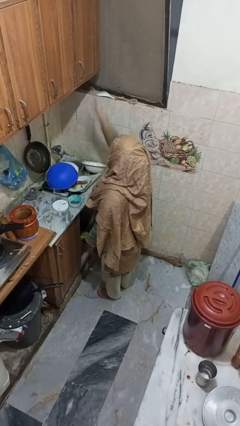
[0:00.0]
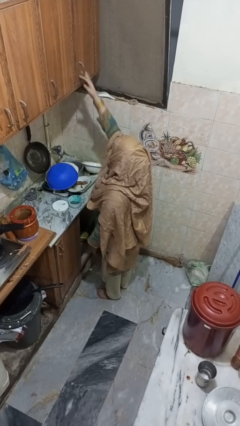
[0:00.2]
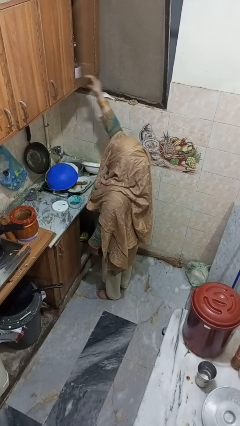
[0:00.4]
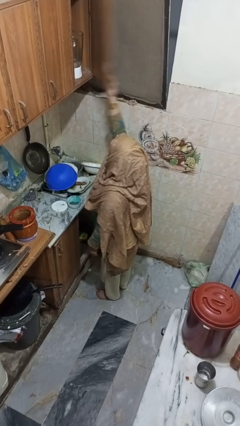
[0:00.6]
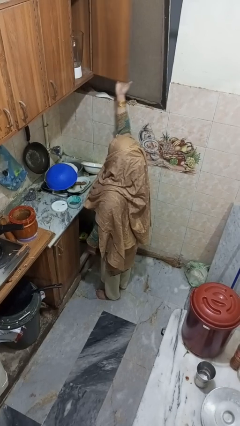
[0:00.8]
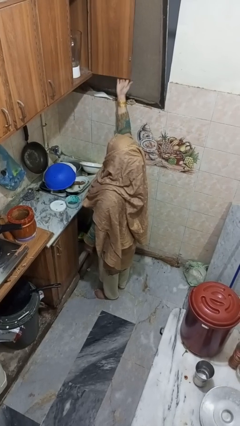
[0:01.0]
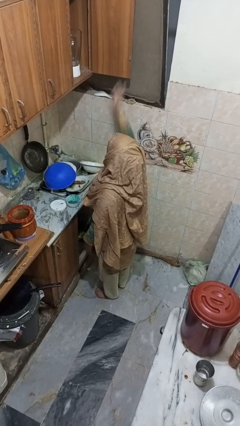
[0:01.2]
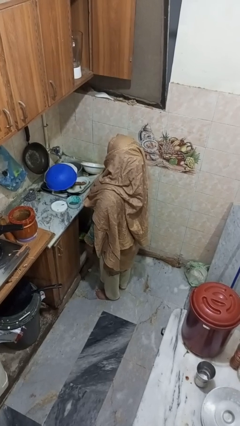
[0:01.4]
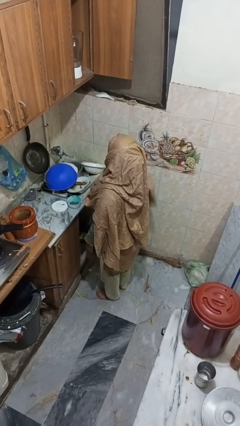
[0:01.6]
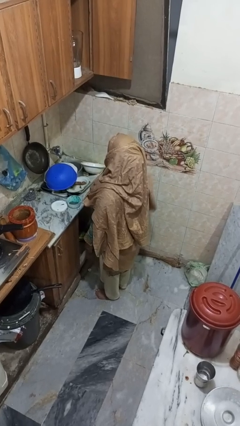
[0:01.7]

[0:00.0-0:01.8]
person opens cabinet

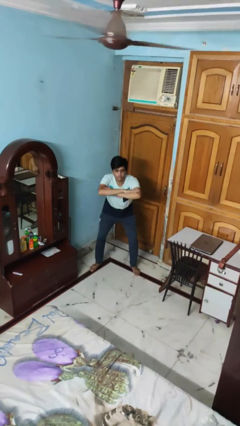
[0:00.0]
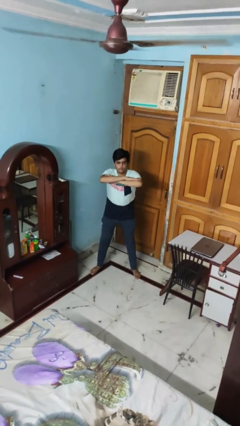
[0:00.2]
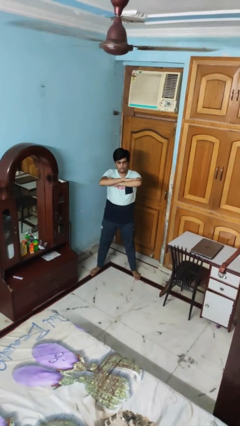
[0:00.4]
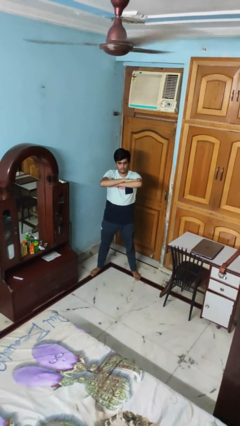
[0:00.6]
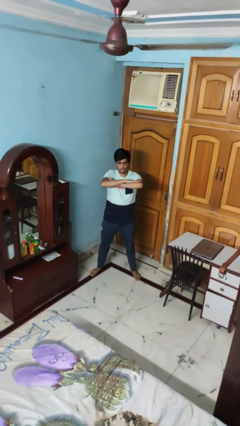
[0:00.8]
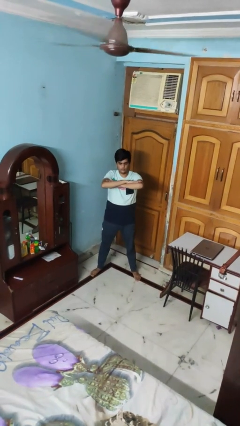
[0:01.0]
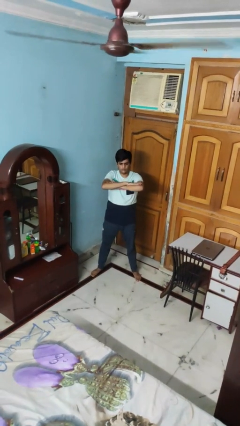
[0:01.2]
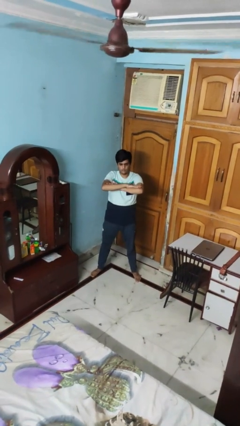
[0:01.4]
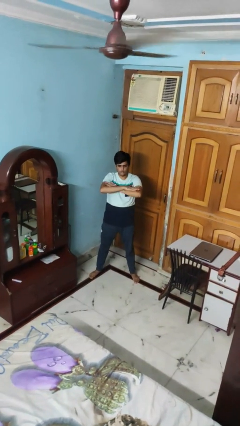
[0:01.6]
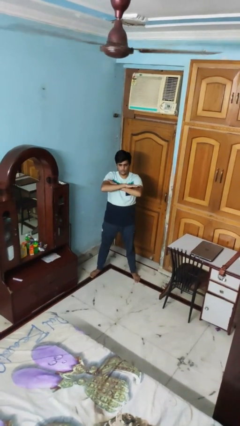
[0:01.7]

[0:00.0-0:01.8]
person stands up

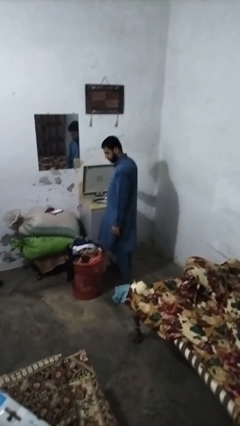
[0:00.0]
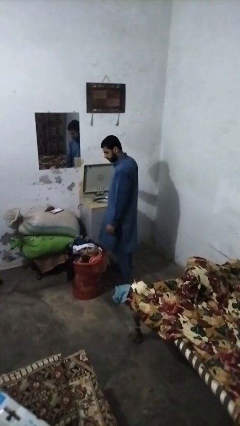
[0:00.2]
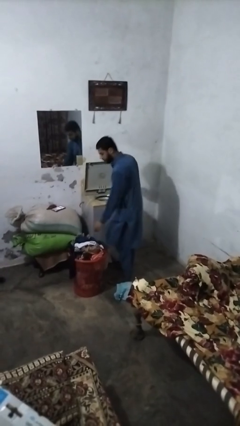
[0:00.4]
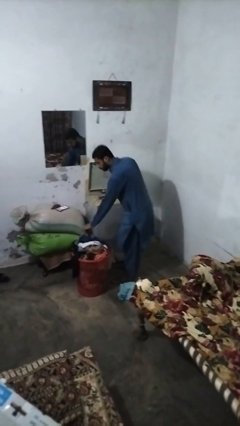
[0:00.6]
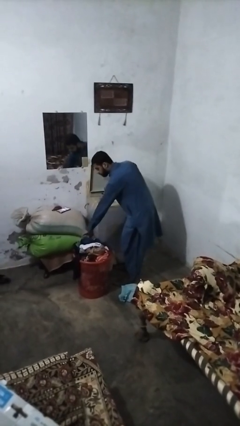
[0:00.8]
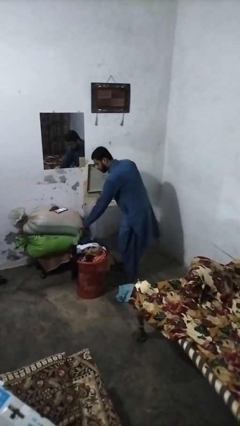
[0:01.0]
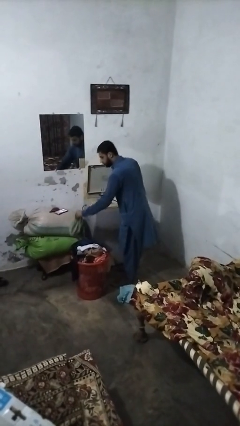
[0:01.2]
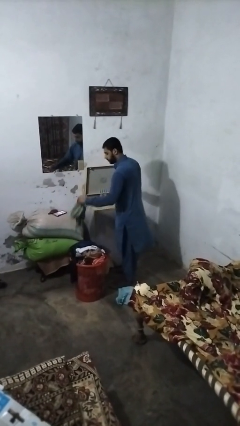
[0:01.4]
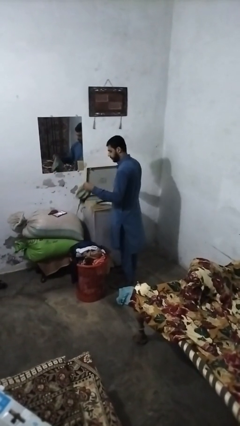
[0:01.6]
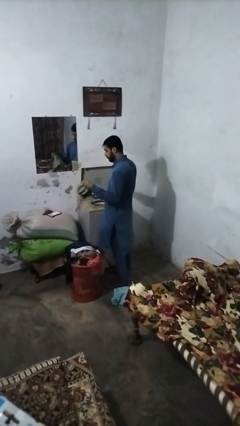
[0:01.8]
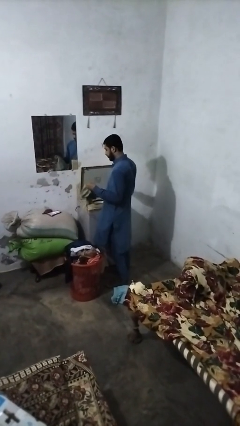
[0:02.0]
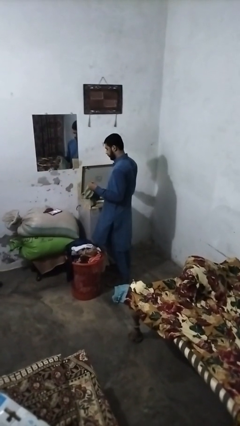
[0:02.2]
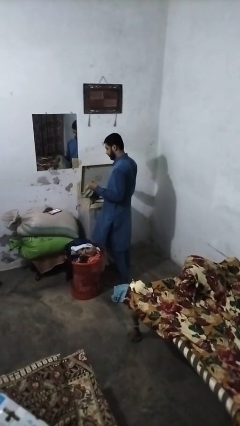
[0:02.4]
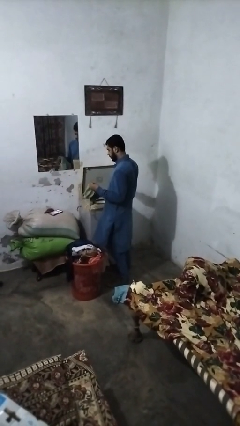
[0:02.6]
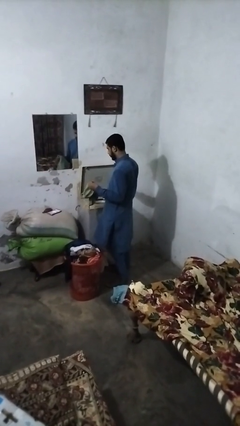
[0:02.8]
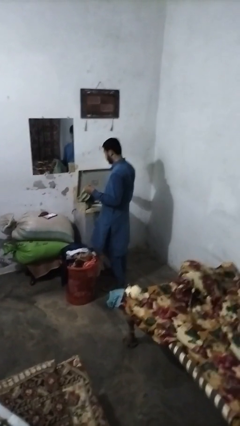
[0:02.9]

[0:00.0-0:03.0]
person unloads clotheswasher

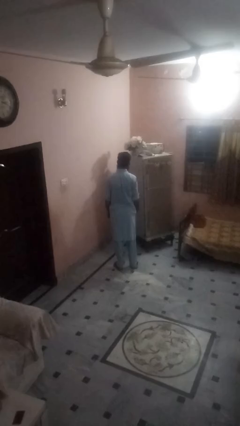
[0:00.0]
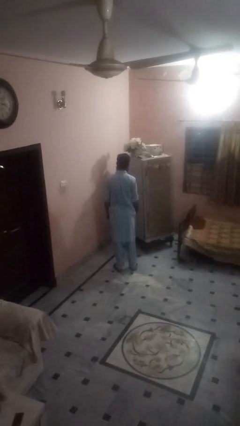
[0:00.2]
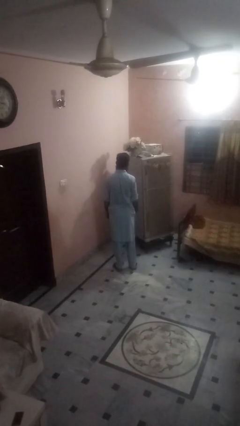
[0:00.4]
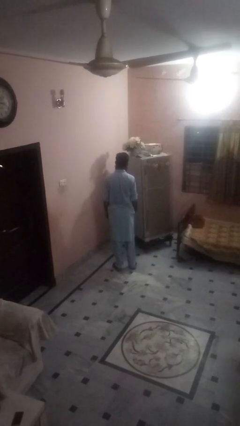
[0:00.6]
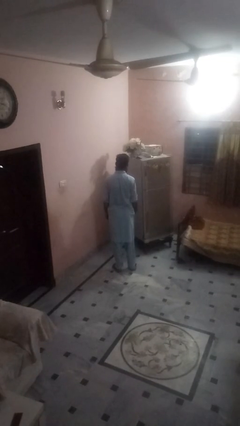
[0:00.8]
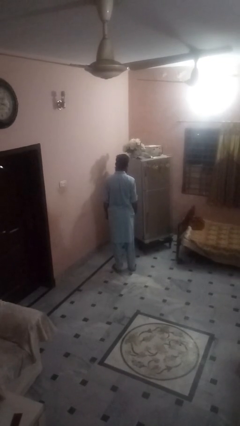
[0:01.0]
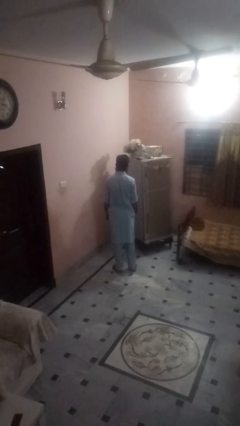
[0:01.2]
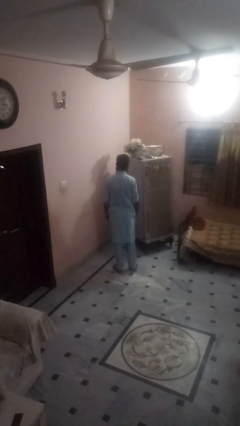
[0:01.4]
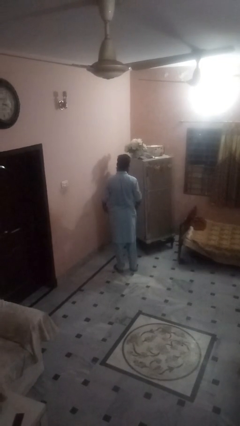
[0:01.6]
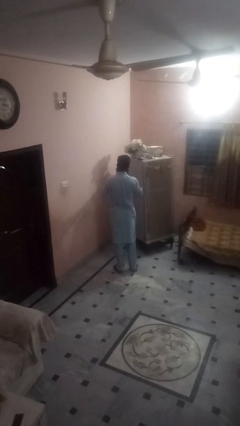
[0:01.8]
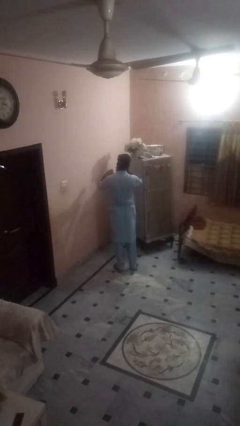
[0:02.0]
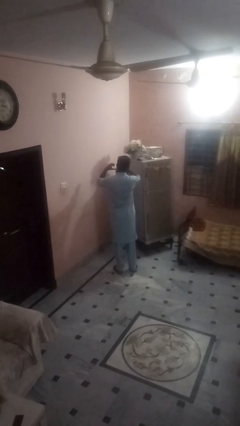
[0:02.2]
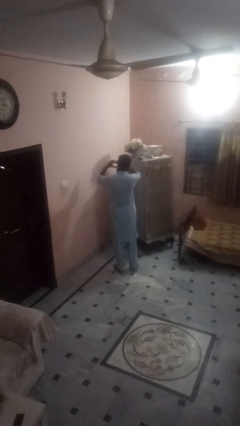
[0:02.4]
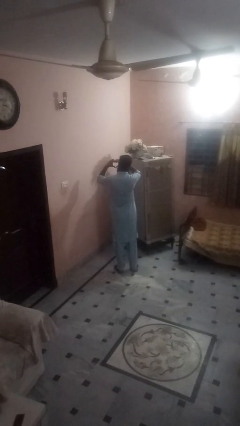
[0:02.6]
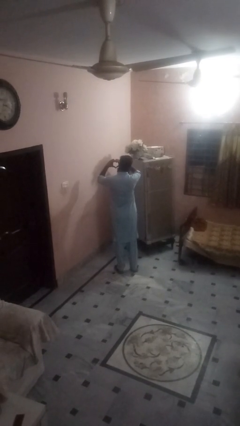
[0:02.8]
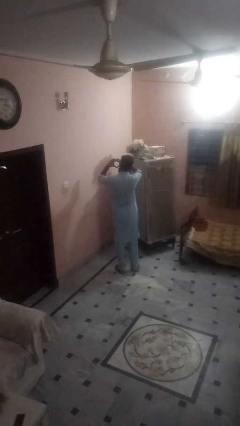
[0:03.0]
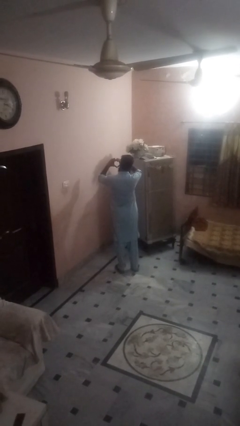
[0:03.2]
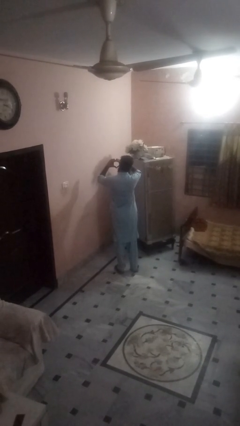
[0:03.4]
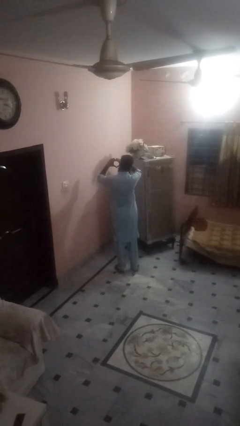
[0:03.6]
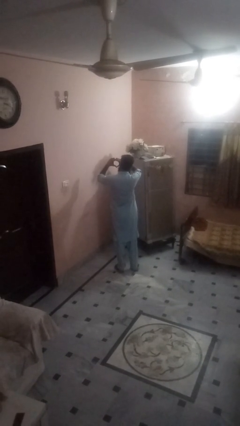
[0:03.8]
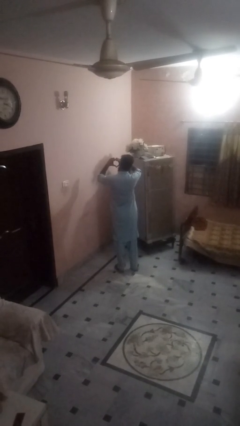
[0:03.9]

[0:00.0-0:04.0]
person gestures heart

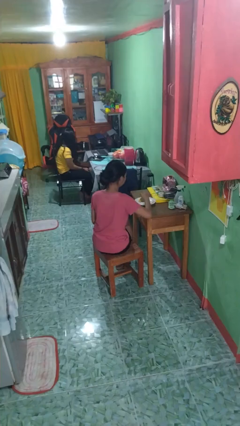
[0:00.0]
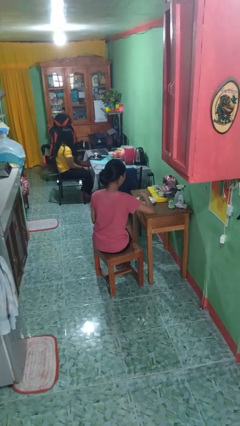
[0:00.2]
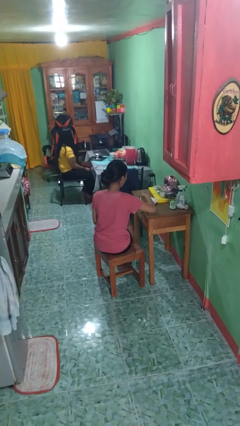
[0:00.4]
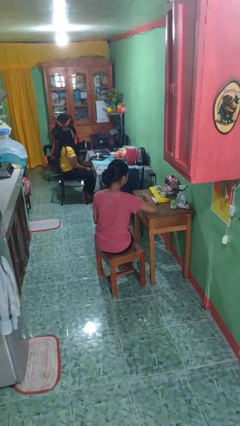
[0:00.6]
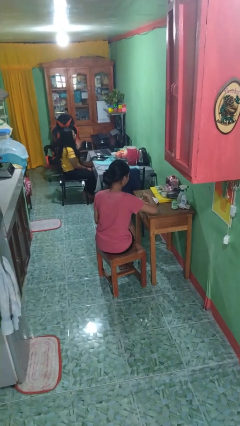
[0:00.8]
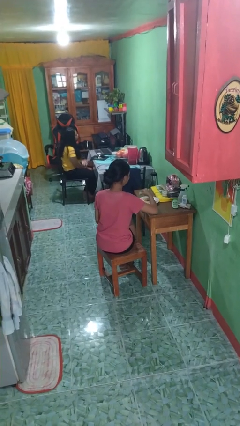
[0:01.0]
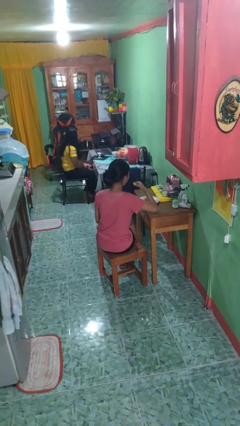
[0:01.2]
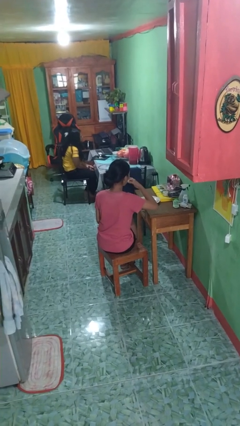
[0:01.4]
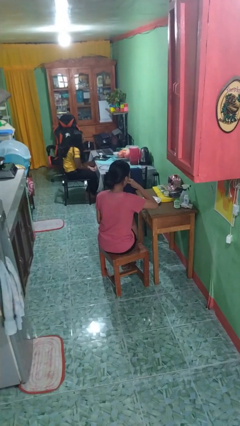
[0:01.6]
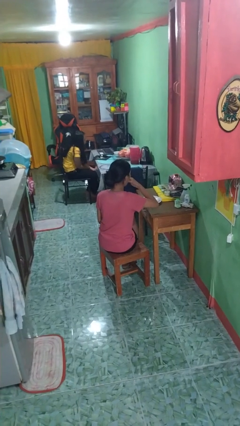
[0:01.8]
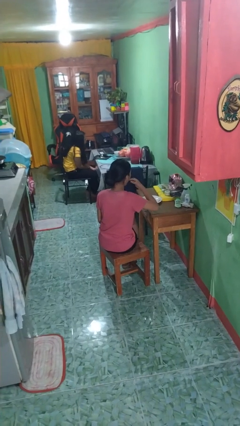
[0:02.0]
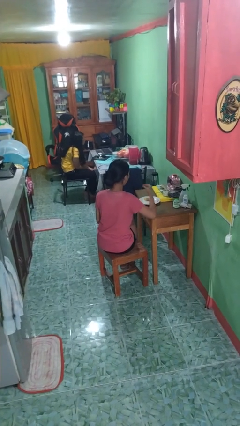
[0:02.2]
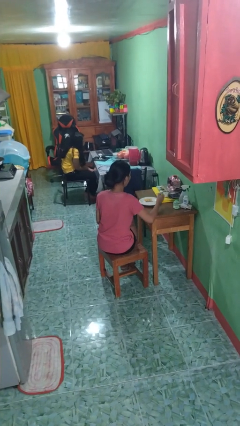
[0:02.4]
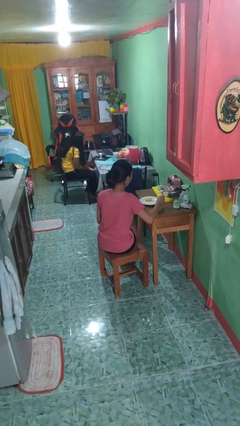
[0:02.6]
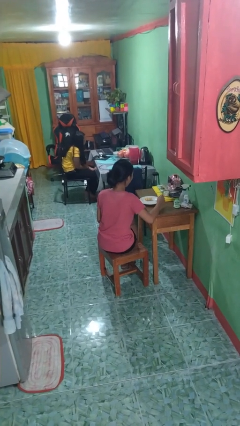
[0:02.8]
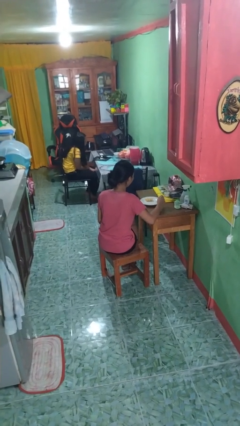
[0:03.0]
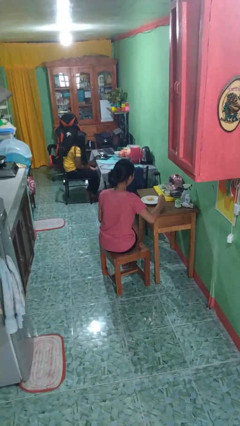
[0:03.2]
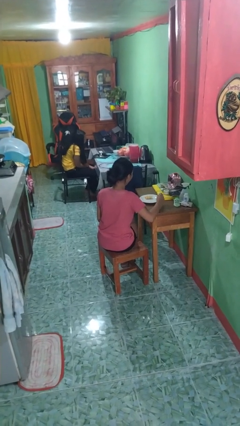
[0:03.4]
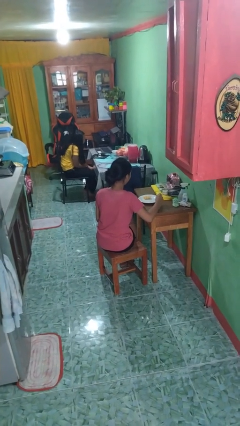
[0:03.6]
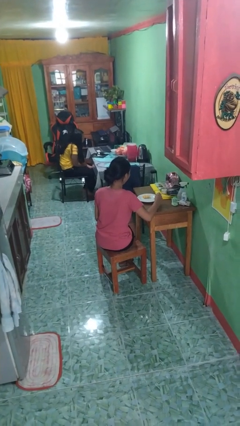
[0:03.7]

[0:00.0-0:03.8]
person eats with hands

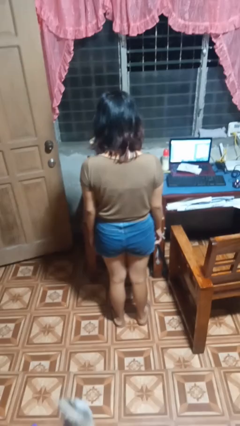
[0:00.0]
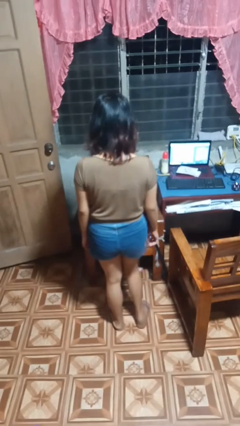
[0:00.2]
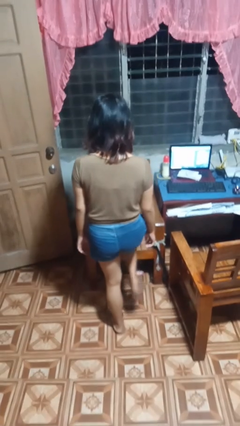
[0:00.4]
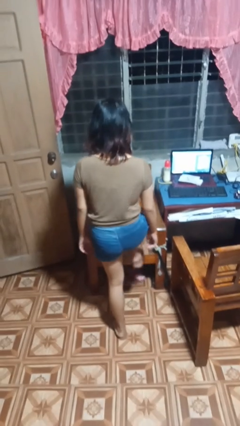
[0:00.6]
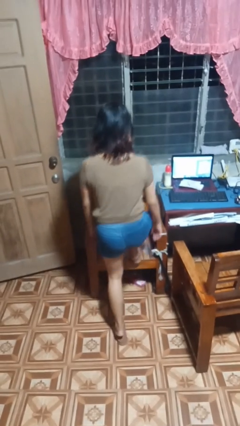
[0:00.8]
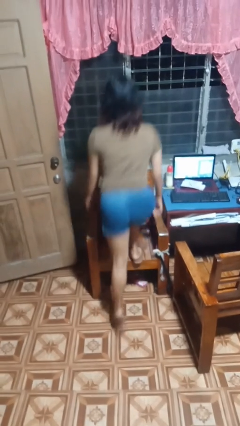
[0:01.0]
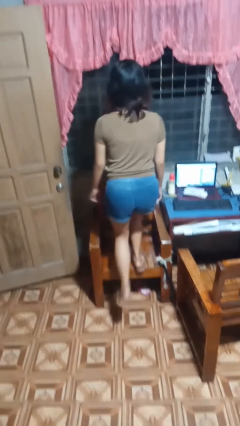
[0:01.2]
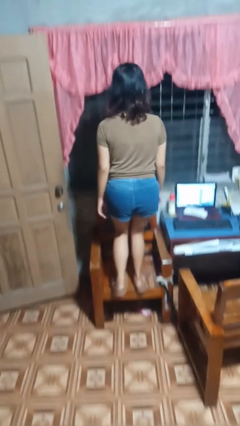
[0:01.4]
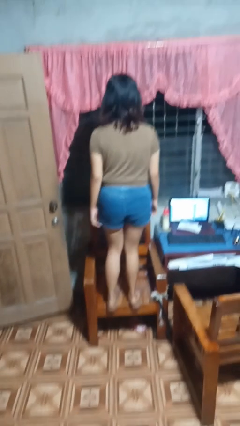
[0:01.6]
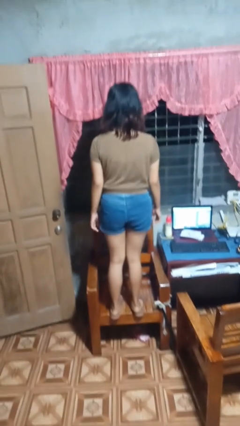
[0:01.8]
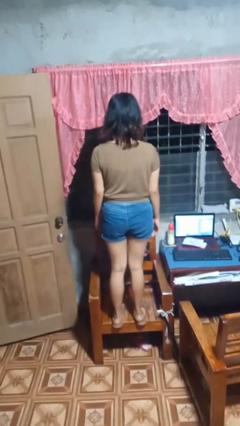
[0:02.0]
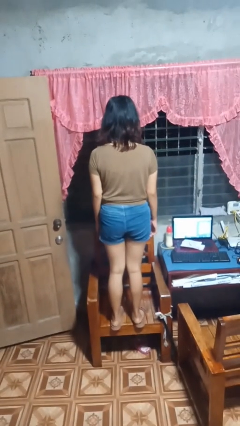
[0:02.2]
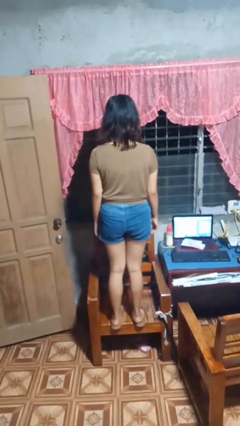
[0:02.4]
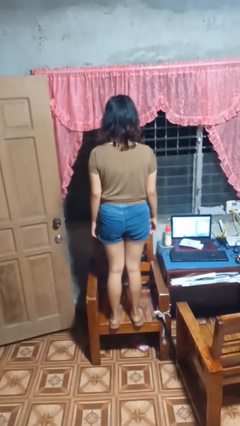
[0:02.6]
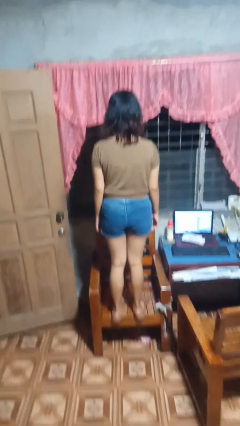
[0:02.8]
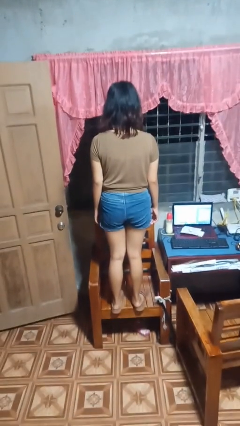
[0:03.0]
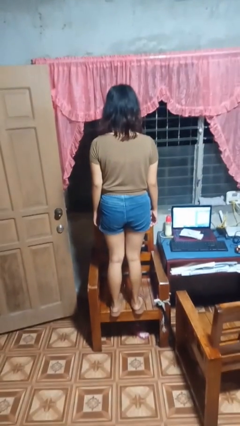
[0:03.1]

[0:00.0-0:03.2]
person climbs on chair
